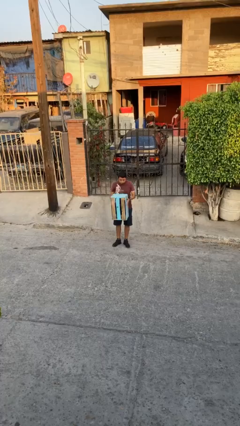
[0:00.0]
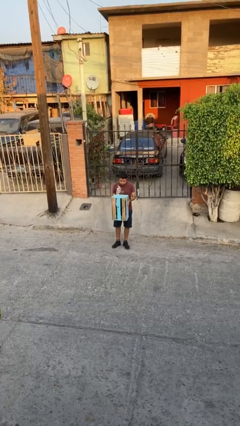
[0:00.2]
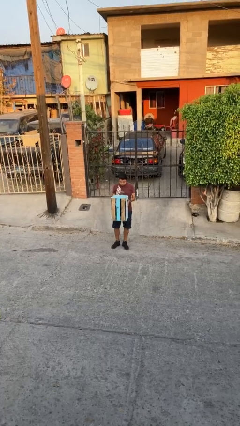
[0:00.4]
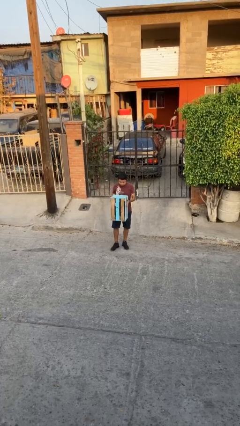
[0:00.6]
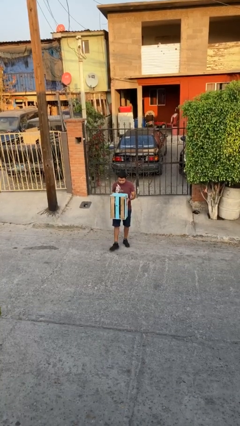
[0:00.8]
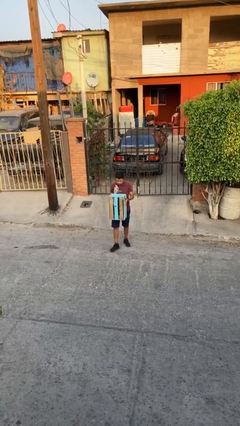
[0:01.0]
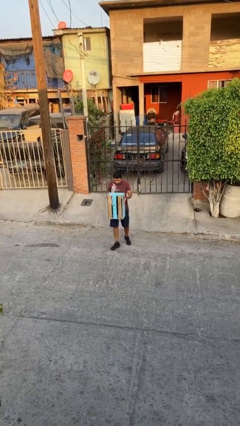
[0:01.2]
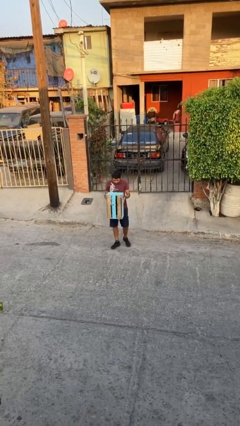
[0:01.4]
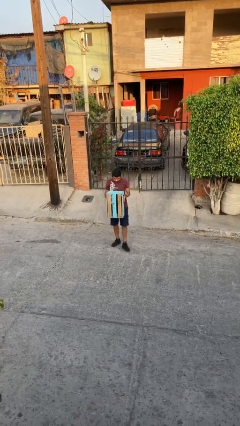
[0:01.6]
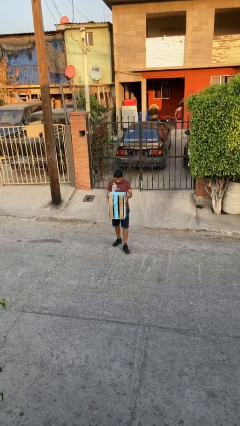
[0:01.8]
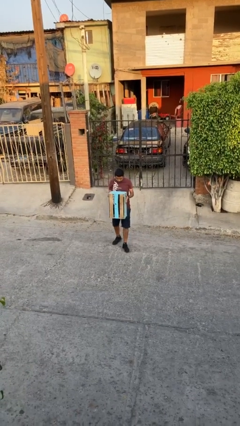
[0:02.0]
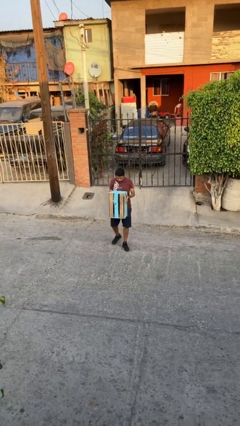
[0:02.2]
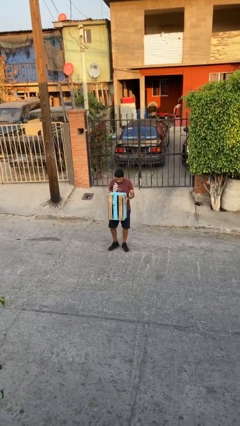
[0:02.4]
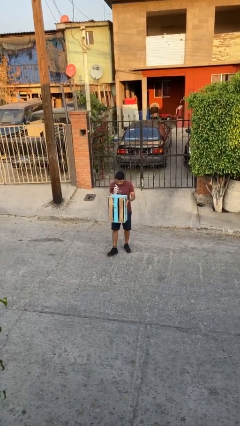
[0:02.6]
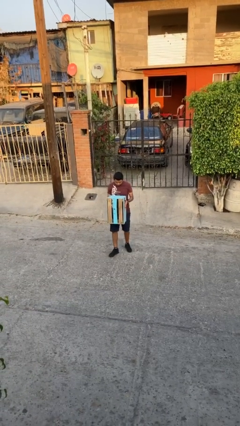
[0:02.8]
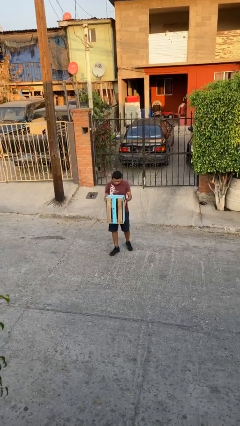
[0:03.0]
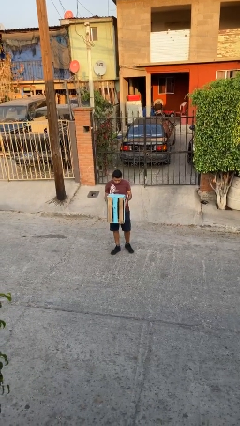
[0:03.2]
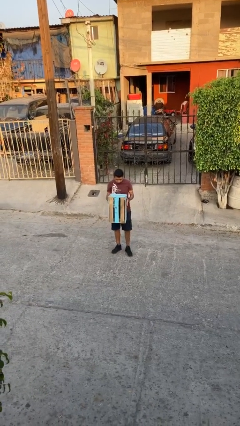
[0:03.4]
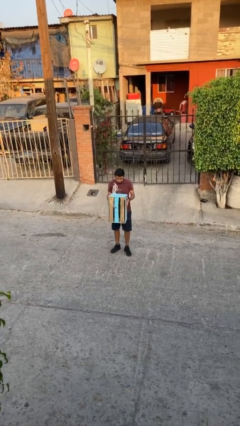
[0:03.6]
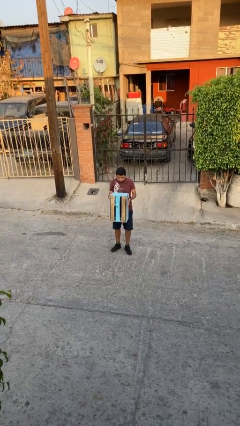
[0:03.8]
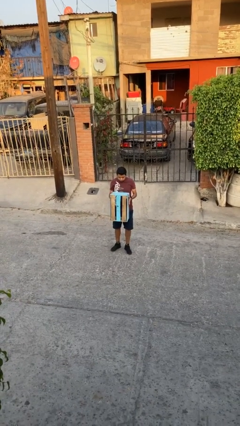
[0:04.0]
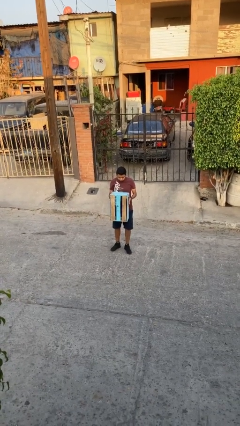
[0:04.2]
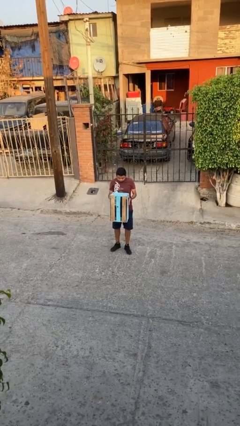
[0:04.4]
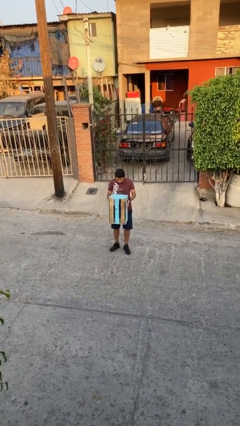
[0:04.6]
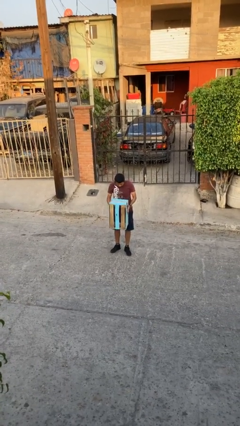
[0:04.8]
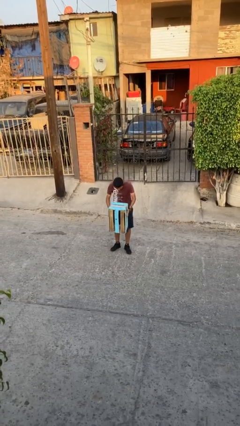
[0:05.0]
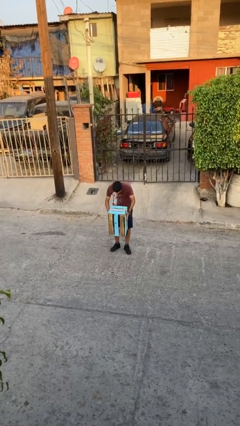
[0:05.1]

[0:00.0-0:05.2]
person carries heavy object

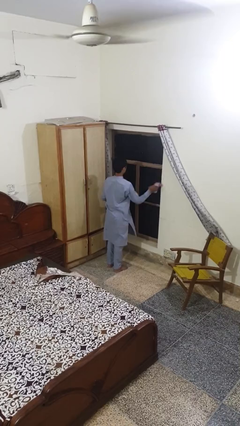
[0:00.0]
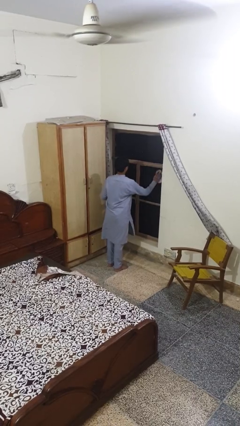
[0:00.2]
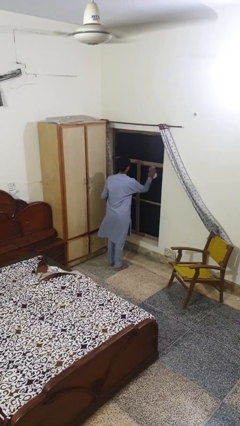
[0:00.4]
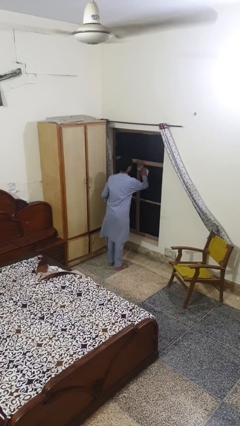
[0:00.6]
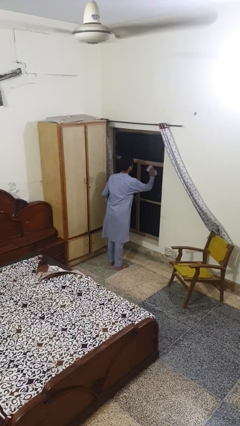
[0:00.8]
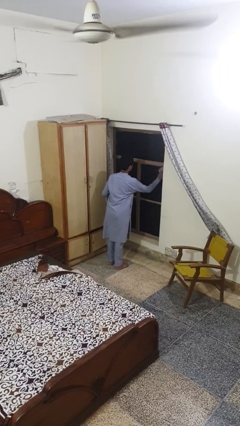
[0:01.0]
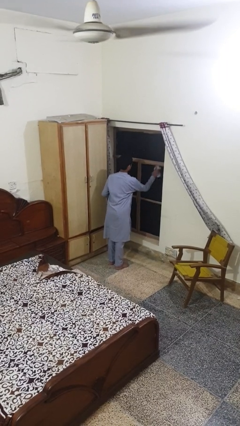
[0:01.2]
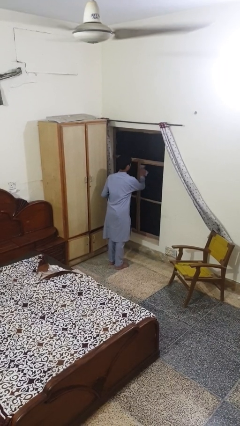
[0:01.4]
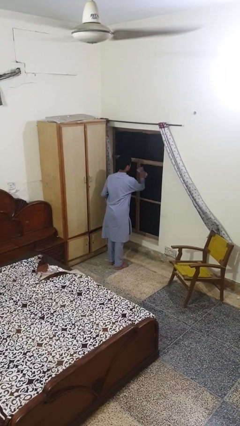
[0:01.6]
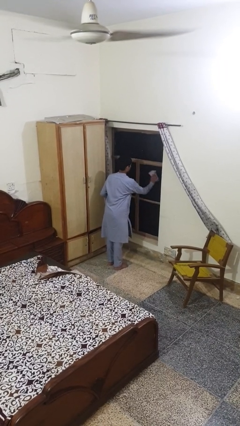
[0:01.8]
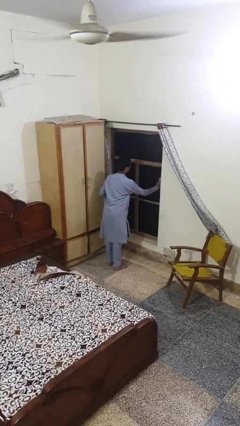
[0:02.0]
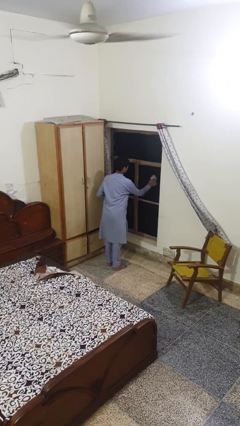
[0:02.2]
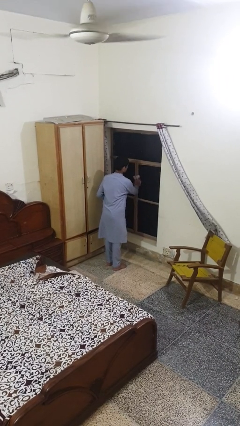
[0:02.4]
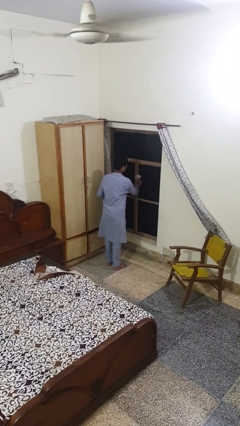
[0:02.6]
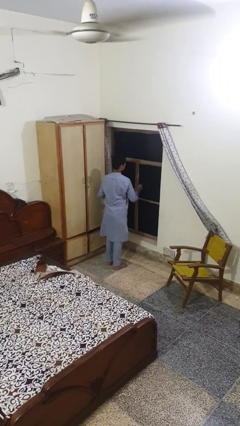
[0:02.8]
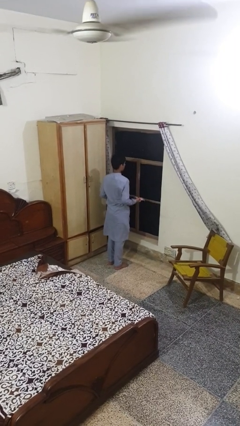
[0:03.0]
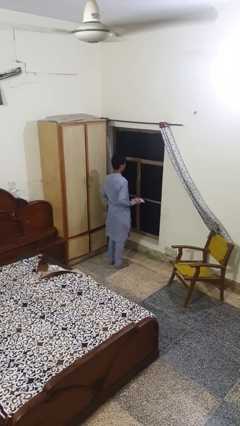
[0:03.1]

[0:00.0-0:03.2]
person washes window

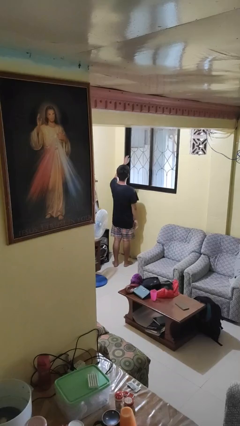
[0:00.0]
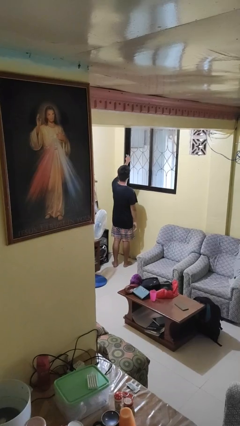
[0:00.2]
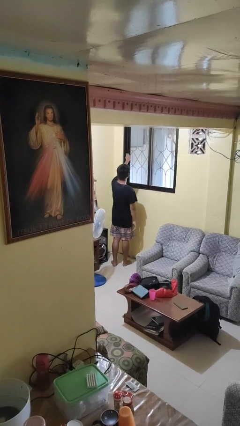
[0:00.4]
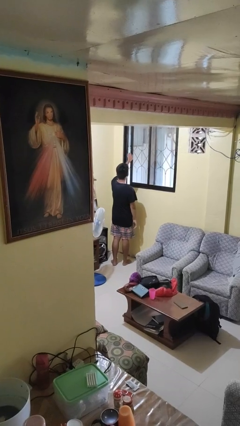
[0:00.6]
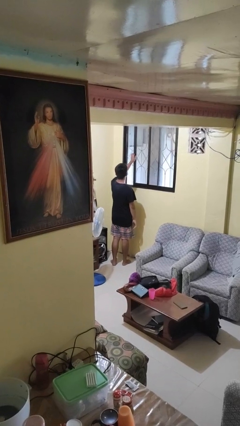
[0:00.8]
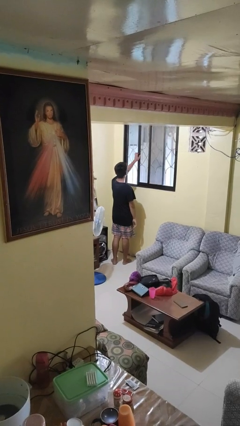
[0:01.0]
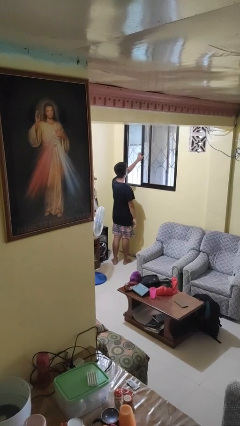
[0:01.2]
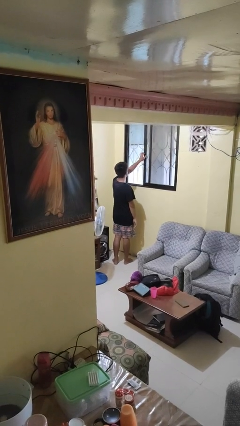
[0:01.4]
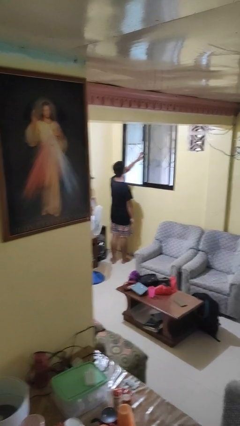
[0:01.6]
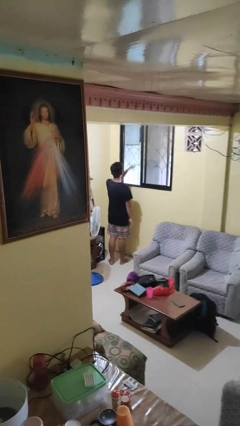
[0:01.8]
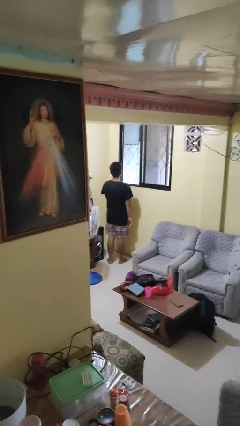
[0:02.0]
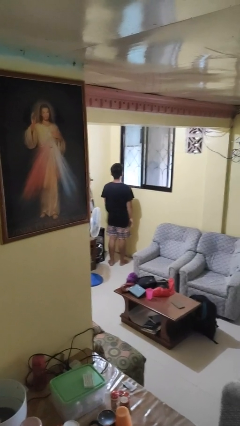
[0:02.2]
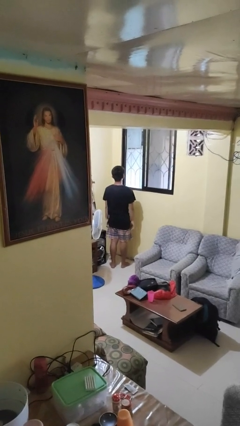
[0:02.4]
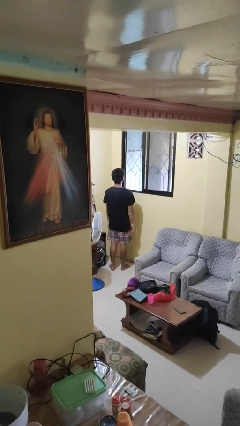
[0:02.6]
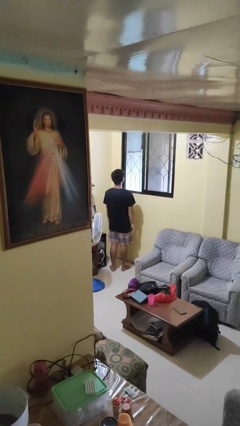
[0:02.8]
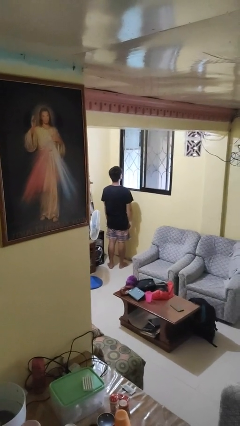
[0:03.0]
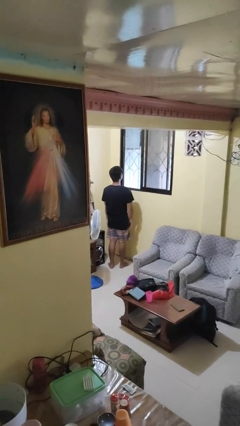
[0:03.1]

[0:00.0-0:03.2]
person opens home window

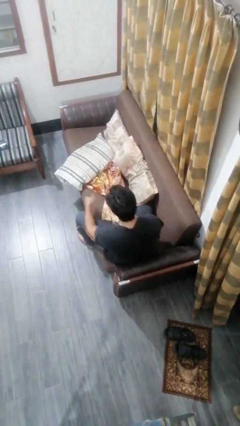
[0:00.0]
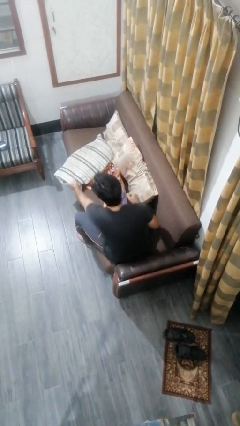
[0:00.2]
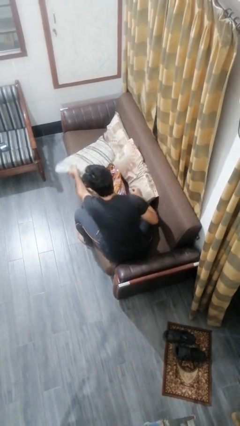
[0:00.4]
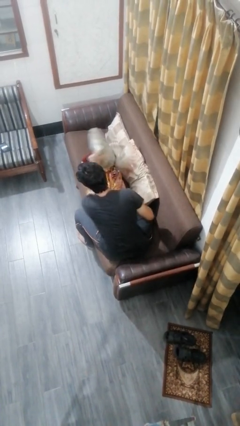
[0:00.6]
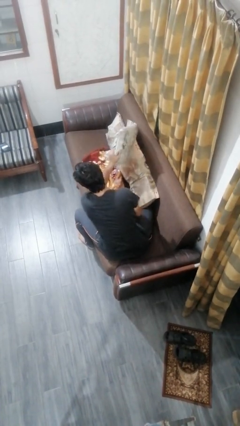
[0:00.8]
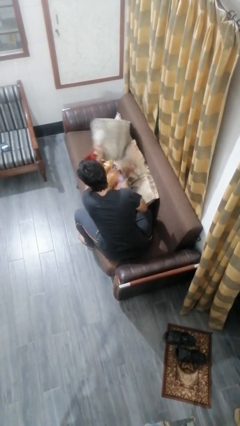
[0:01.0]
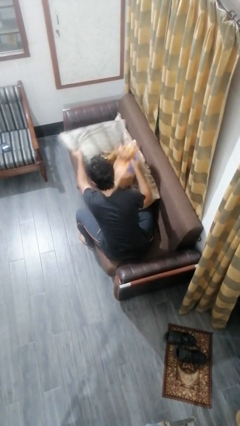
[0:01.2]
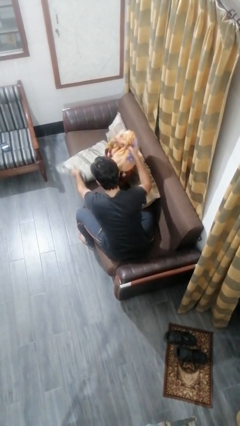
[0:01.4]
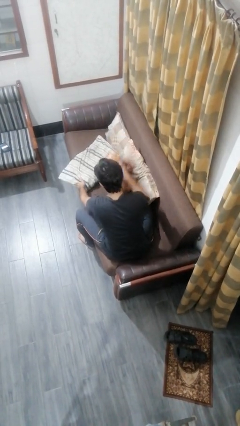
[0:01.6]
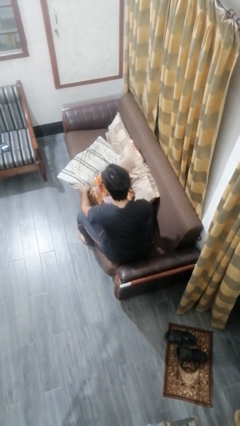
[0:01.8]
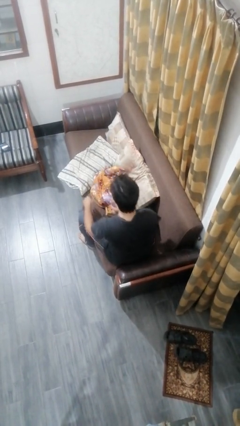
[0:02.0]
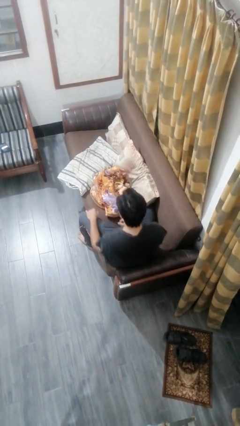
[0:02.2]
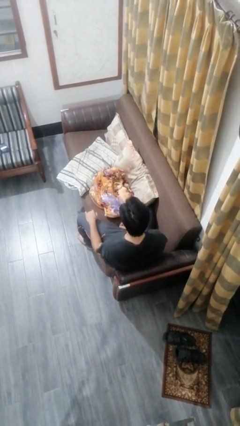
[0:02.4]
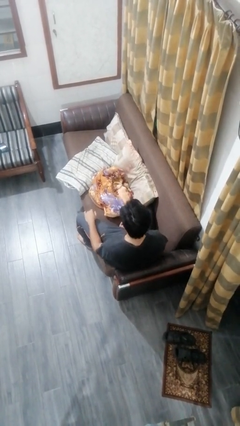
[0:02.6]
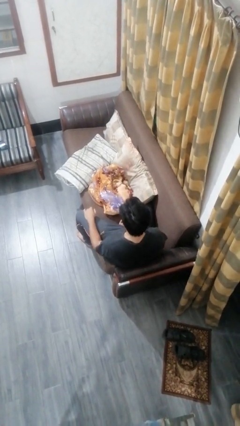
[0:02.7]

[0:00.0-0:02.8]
person searches in couch

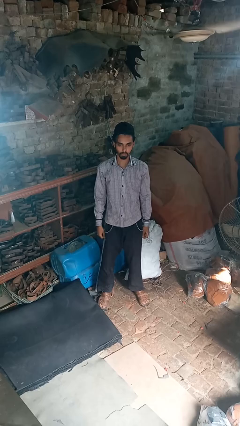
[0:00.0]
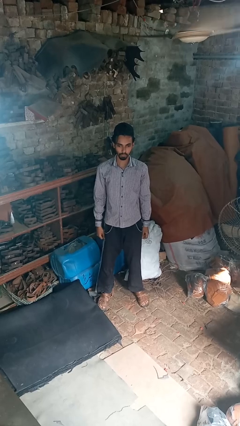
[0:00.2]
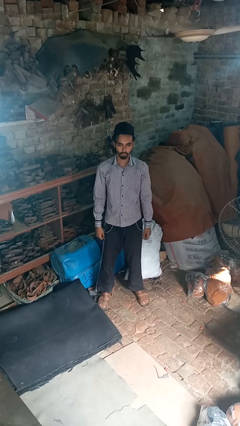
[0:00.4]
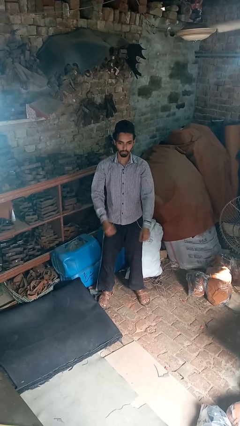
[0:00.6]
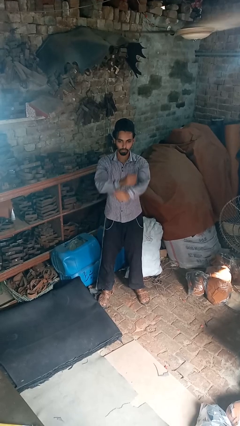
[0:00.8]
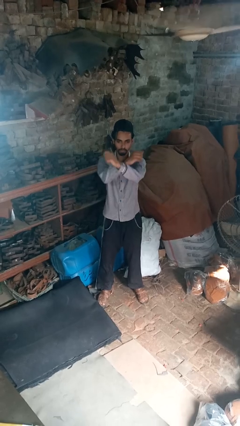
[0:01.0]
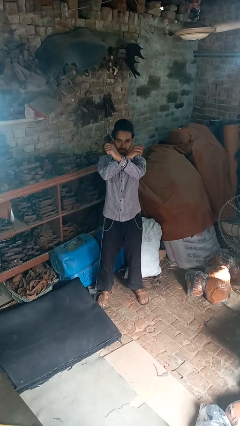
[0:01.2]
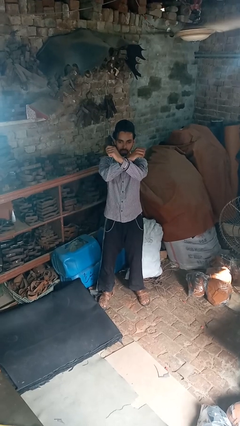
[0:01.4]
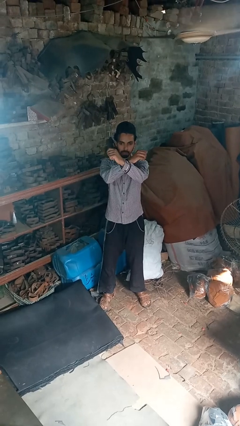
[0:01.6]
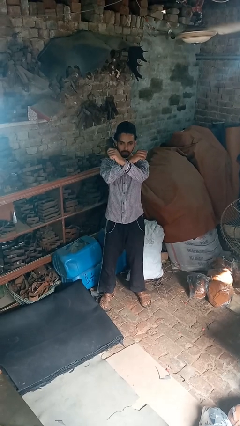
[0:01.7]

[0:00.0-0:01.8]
person crosses arms

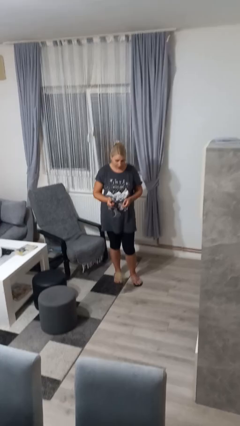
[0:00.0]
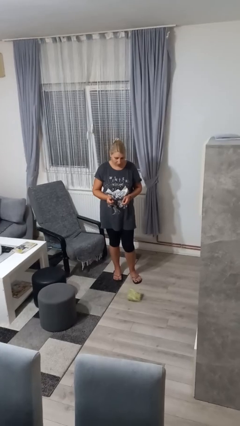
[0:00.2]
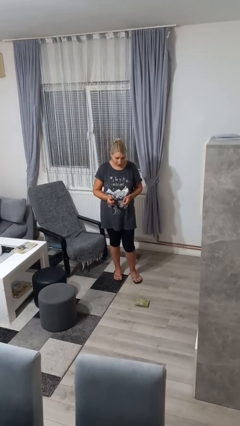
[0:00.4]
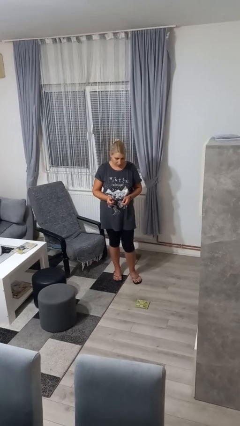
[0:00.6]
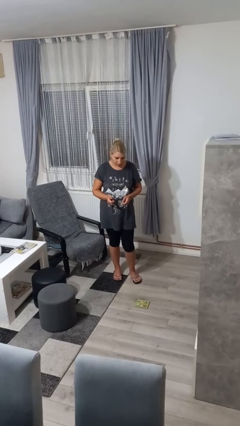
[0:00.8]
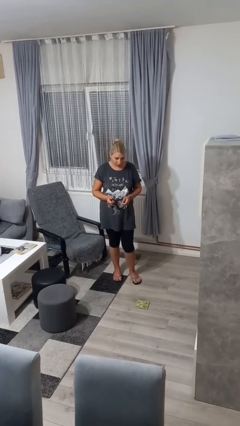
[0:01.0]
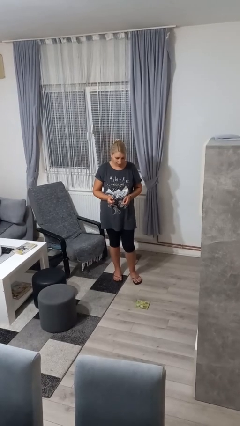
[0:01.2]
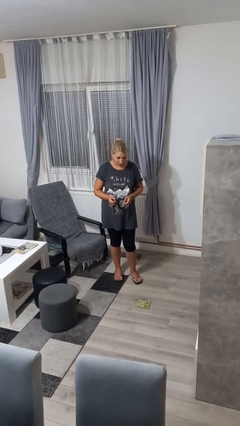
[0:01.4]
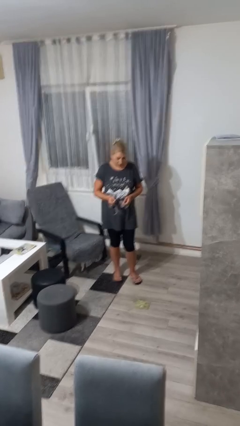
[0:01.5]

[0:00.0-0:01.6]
person drops object
